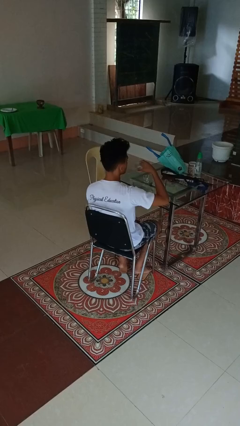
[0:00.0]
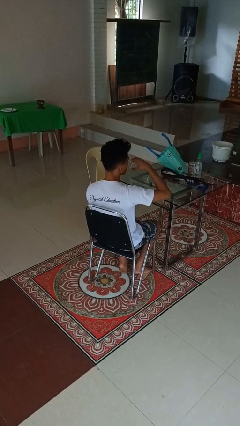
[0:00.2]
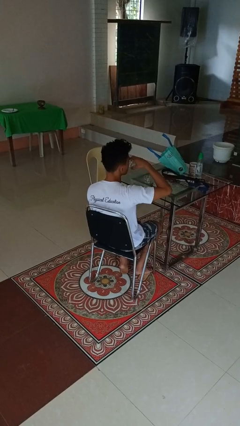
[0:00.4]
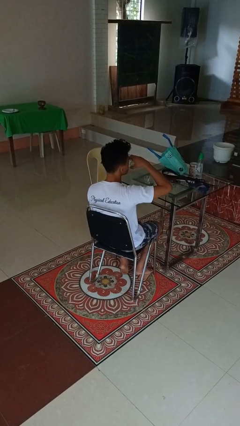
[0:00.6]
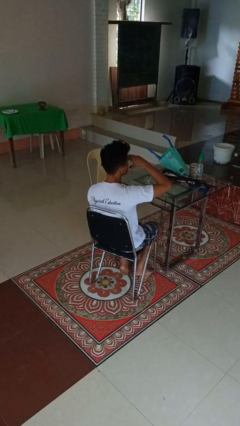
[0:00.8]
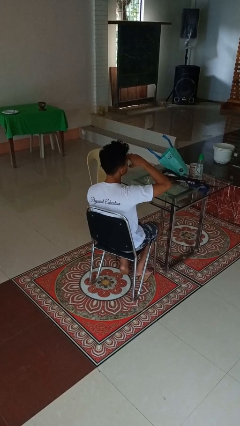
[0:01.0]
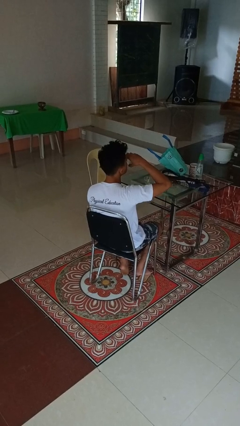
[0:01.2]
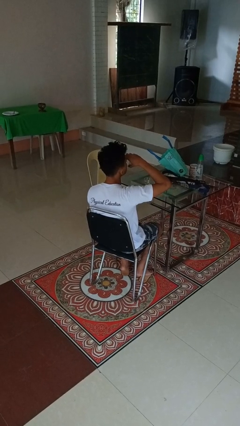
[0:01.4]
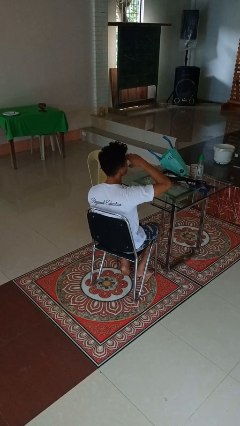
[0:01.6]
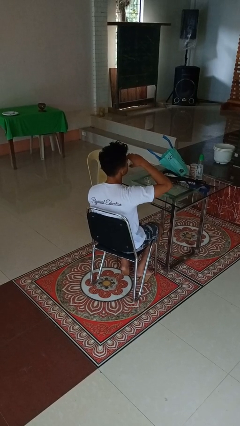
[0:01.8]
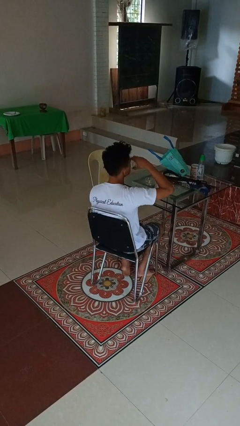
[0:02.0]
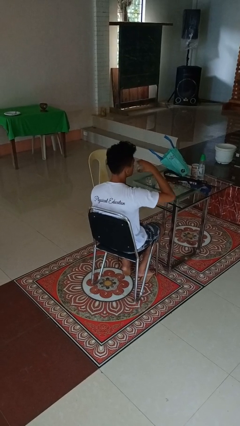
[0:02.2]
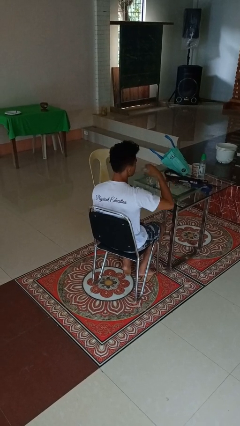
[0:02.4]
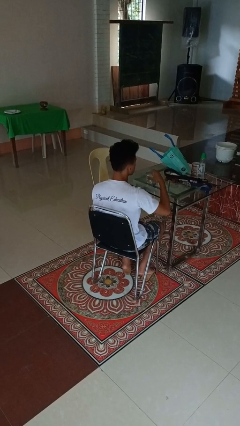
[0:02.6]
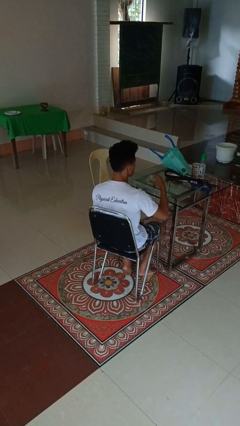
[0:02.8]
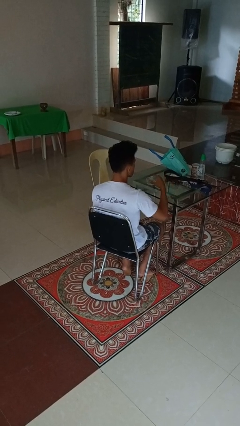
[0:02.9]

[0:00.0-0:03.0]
person drinks from shotglass

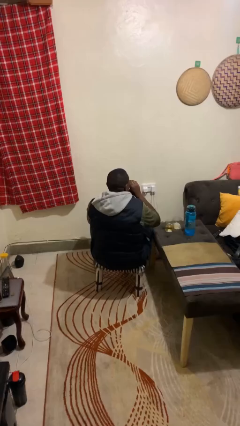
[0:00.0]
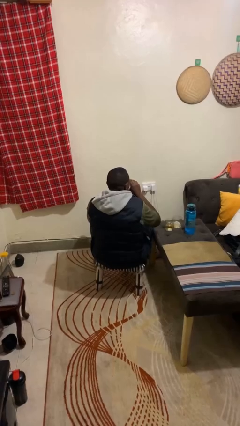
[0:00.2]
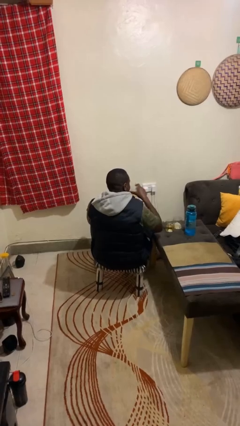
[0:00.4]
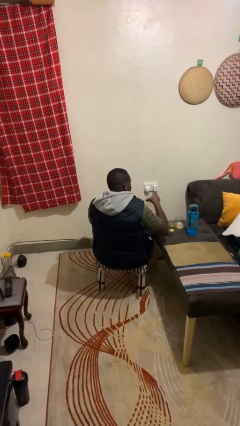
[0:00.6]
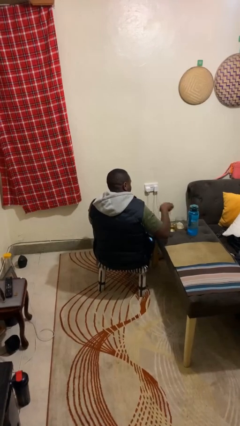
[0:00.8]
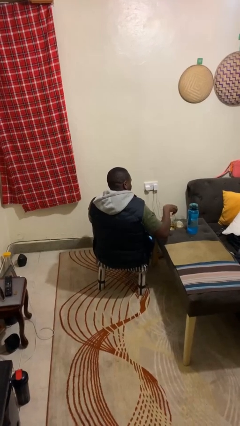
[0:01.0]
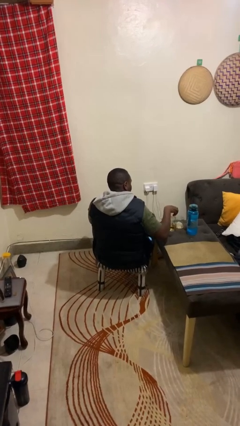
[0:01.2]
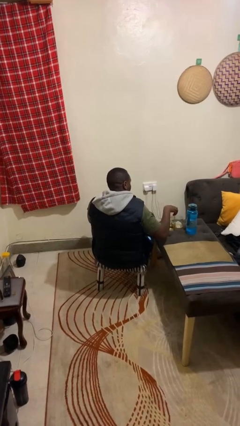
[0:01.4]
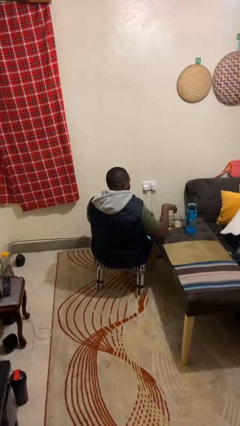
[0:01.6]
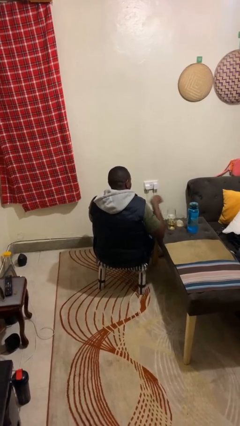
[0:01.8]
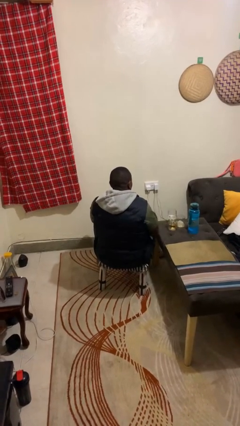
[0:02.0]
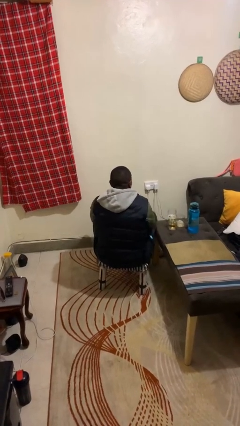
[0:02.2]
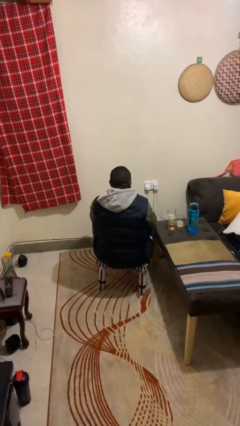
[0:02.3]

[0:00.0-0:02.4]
person puts down object on table

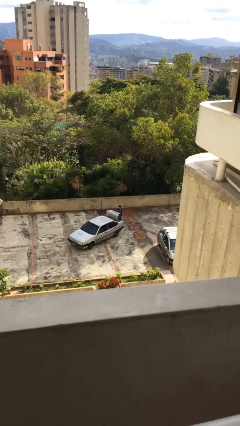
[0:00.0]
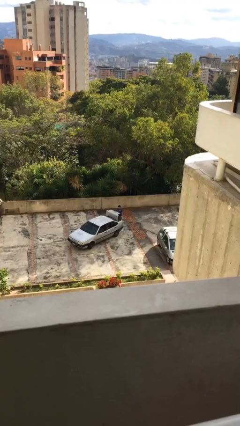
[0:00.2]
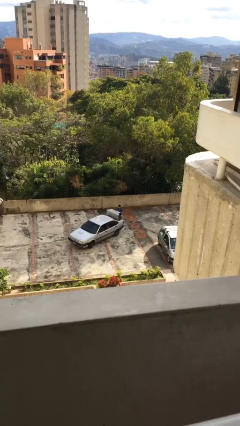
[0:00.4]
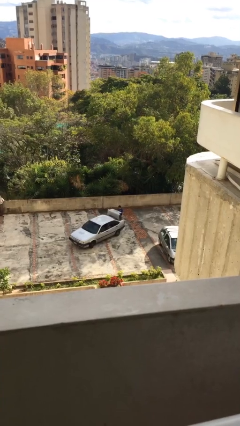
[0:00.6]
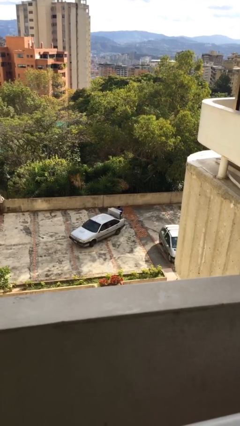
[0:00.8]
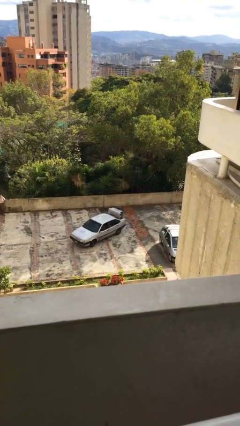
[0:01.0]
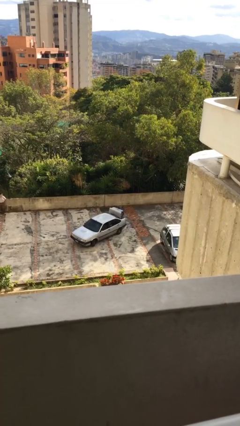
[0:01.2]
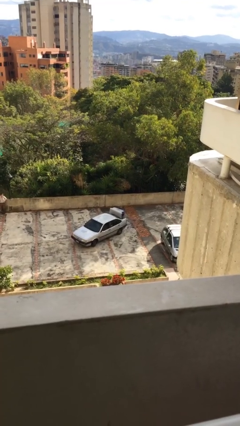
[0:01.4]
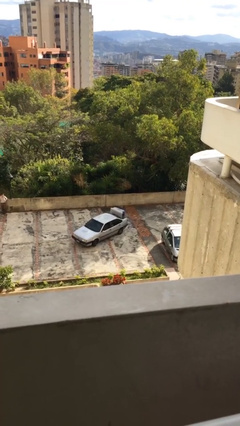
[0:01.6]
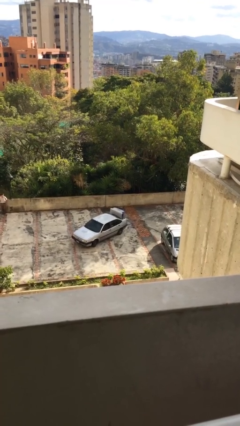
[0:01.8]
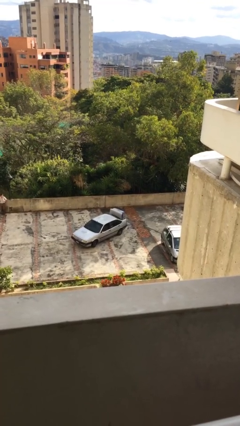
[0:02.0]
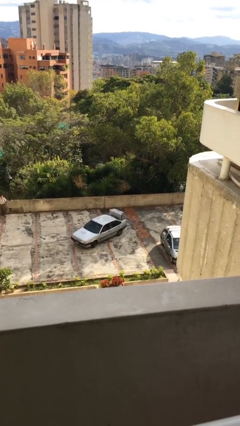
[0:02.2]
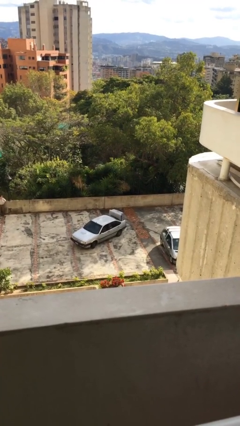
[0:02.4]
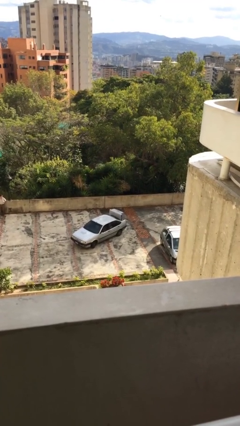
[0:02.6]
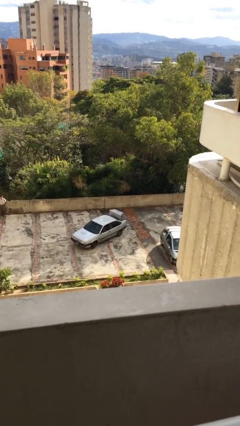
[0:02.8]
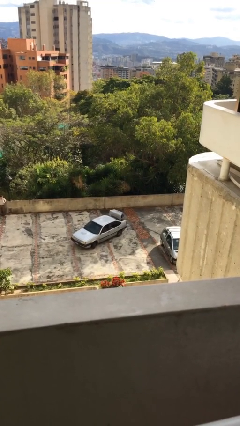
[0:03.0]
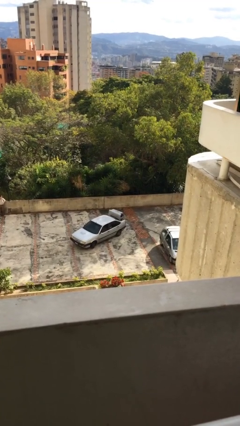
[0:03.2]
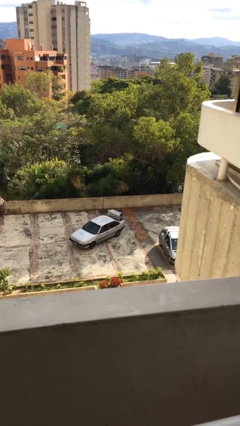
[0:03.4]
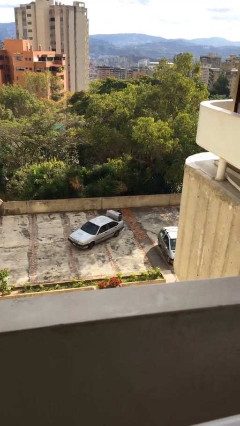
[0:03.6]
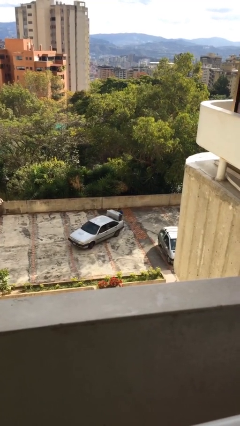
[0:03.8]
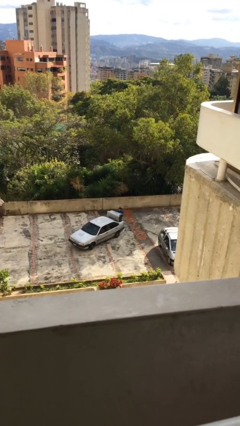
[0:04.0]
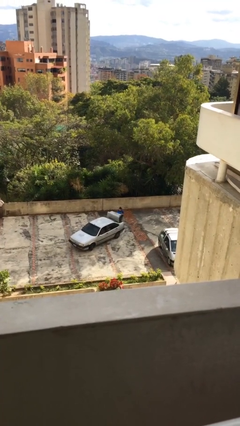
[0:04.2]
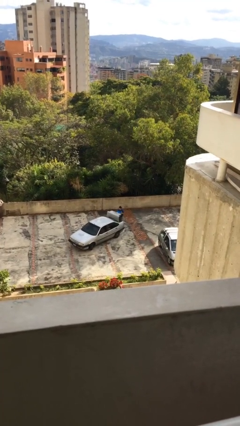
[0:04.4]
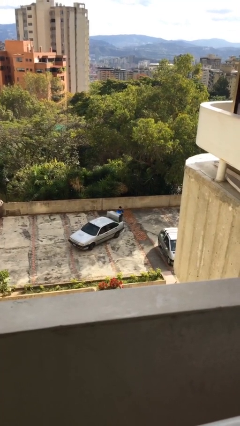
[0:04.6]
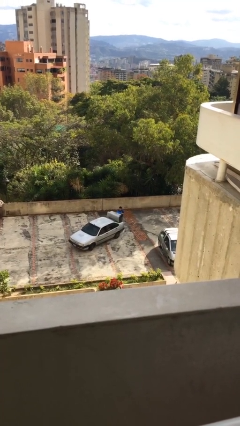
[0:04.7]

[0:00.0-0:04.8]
person unloads car

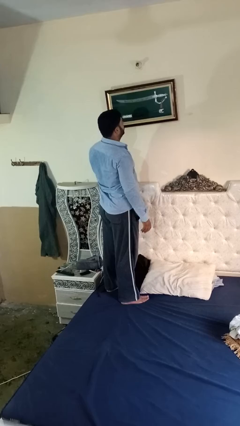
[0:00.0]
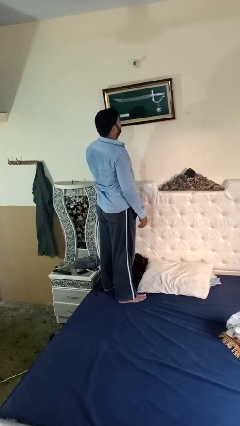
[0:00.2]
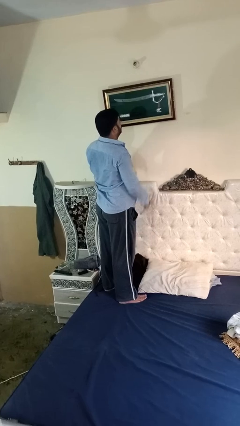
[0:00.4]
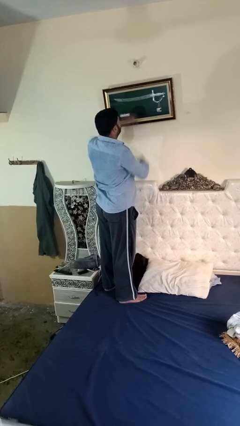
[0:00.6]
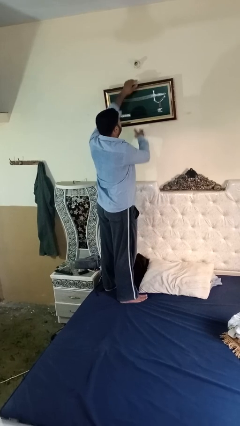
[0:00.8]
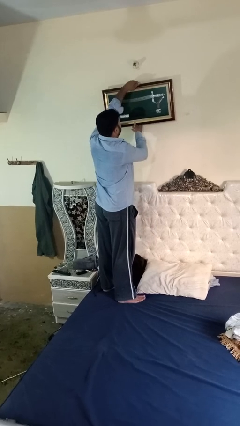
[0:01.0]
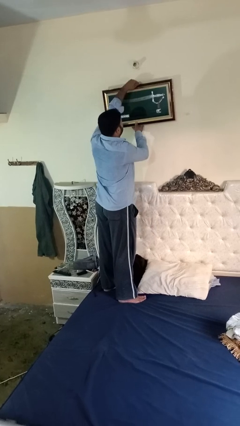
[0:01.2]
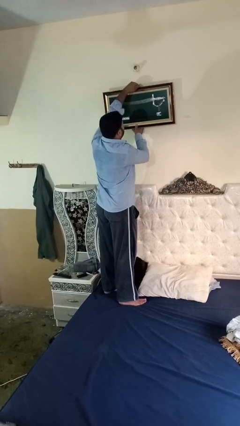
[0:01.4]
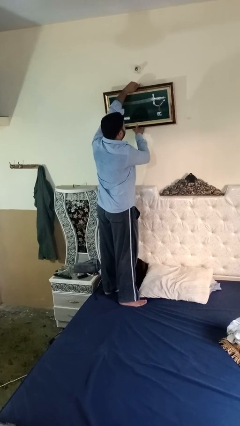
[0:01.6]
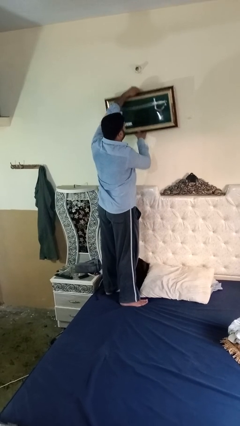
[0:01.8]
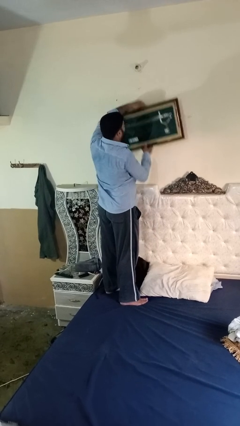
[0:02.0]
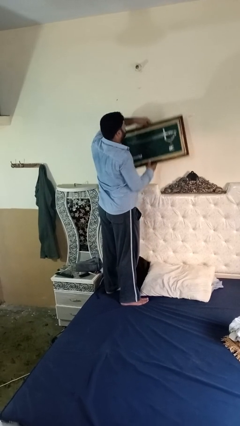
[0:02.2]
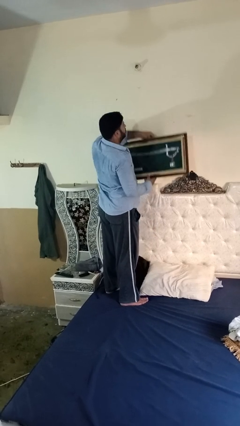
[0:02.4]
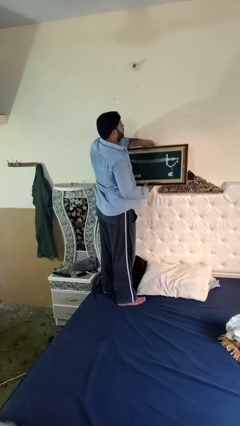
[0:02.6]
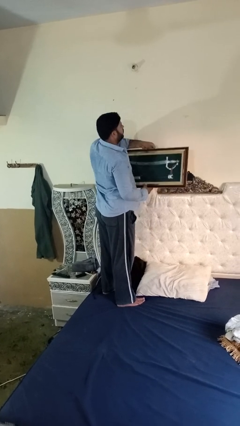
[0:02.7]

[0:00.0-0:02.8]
person takes down picture frame

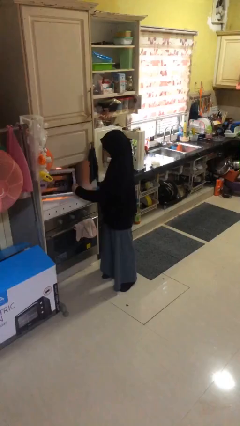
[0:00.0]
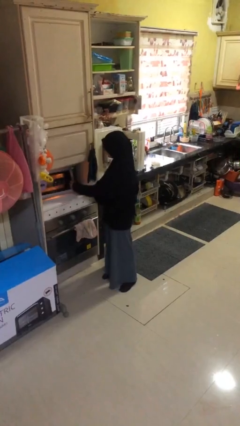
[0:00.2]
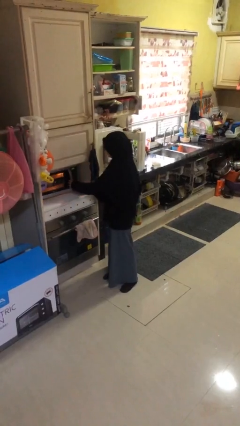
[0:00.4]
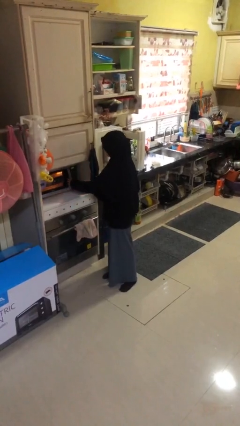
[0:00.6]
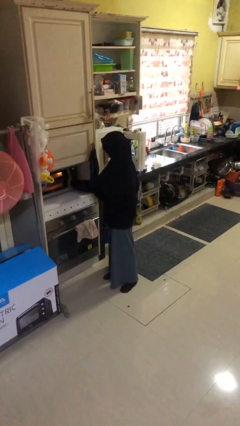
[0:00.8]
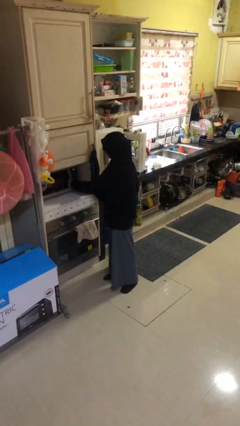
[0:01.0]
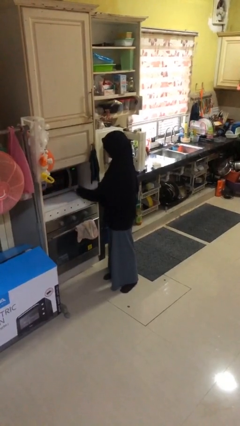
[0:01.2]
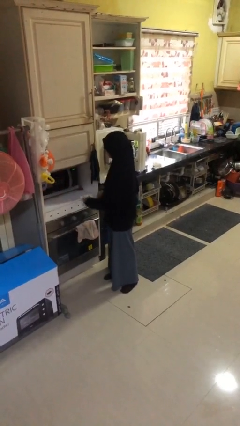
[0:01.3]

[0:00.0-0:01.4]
person closes microwave

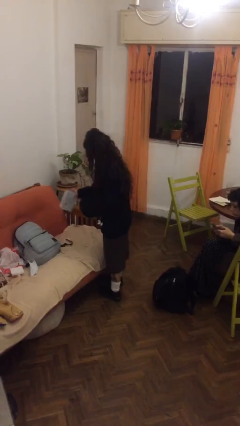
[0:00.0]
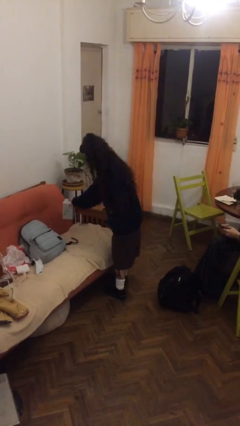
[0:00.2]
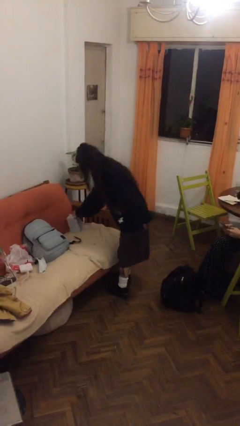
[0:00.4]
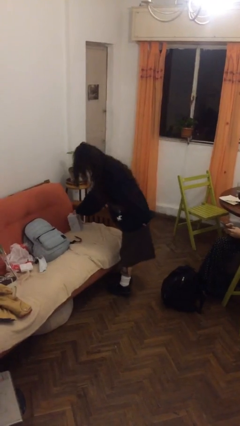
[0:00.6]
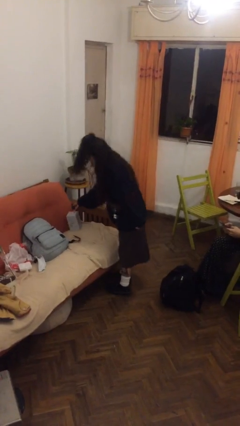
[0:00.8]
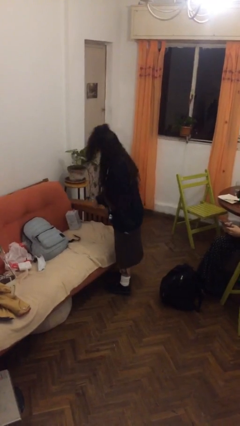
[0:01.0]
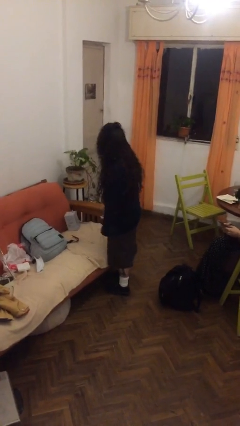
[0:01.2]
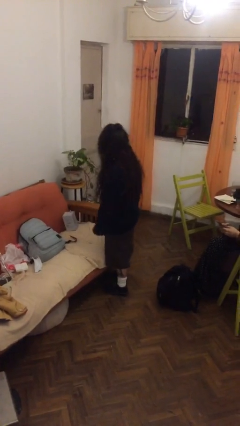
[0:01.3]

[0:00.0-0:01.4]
person puts down object on couch

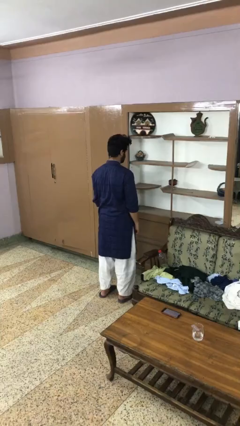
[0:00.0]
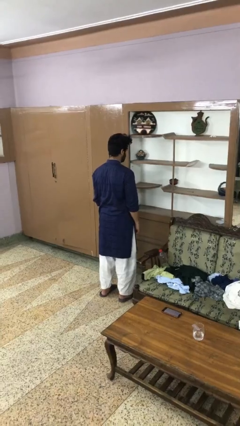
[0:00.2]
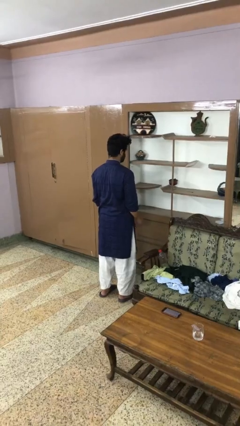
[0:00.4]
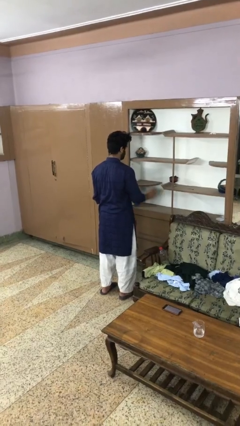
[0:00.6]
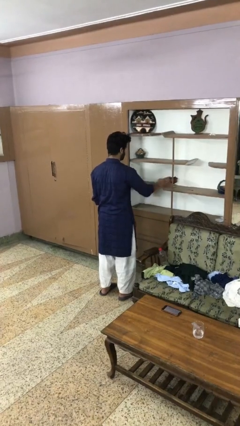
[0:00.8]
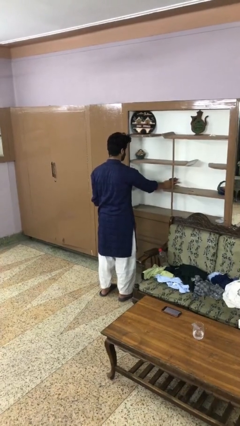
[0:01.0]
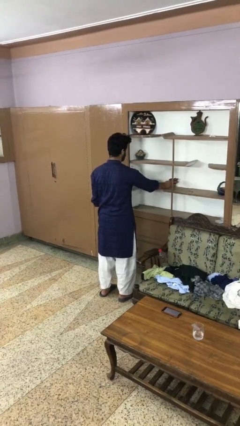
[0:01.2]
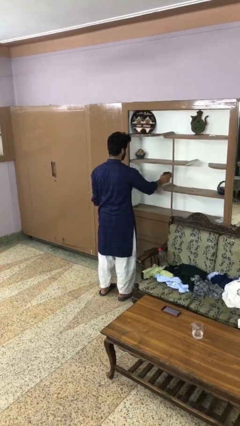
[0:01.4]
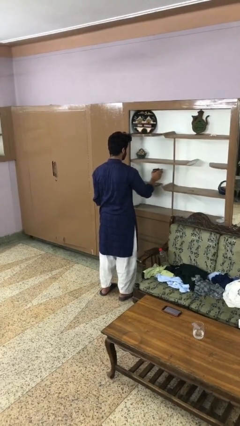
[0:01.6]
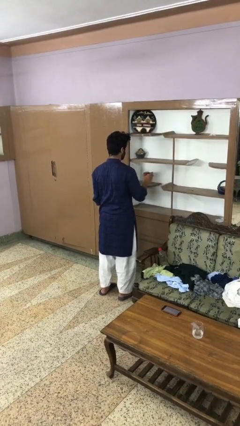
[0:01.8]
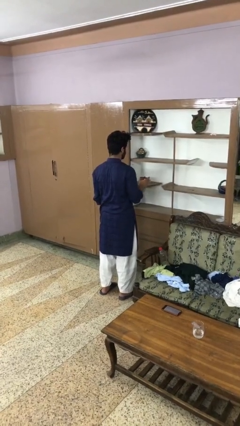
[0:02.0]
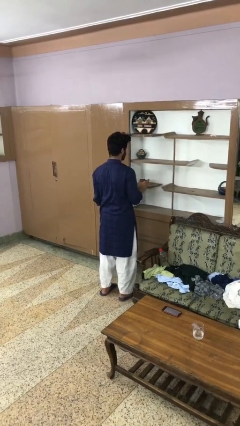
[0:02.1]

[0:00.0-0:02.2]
person picks up object from shelf
